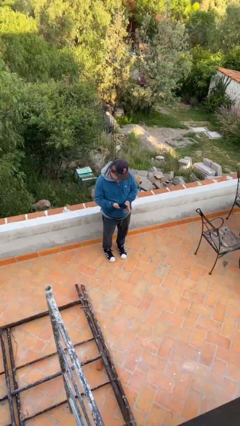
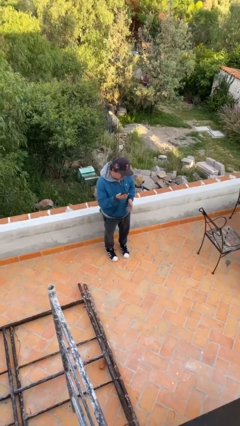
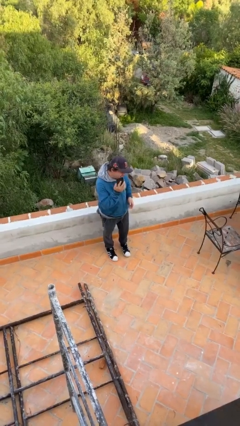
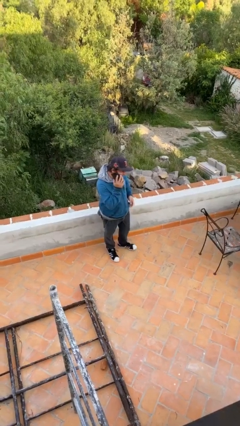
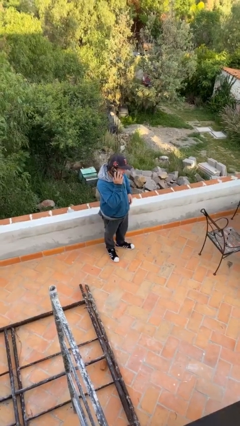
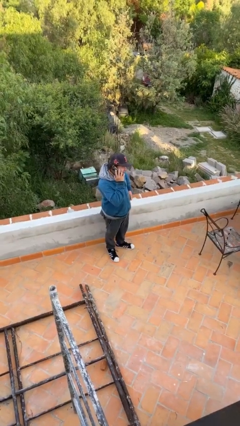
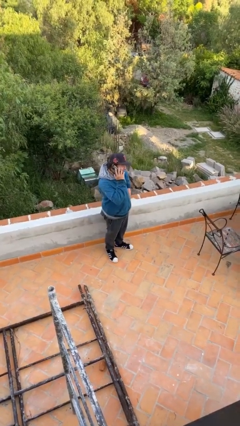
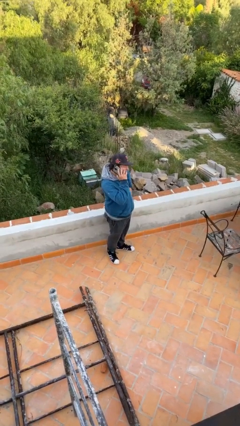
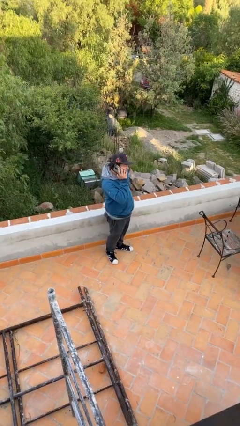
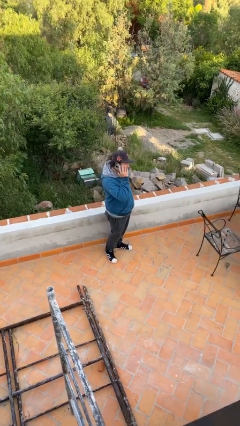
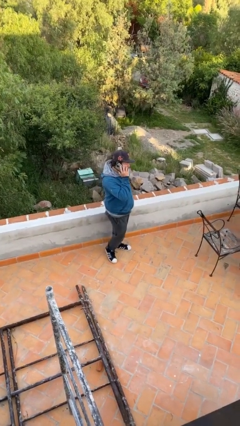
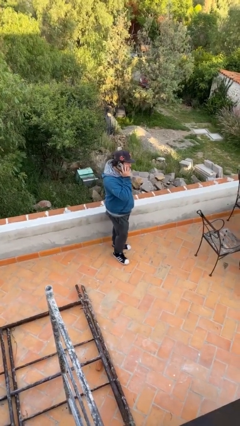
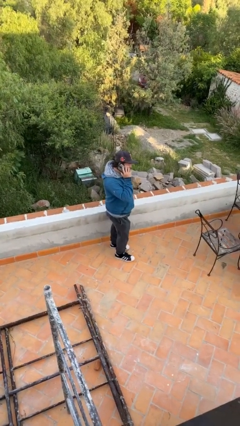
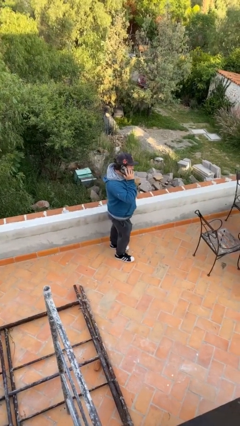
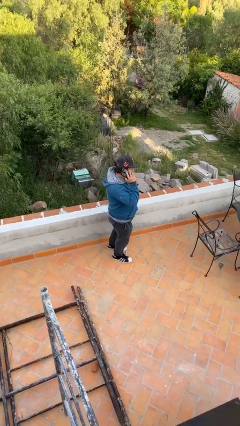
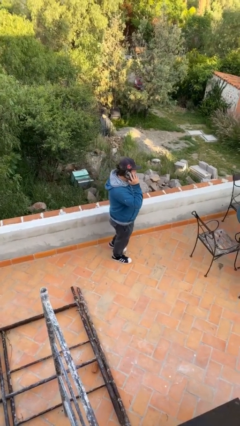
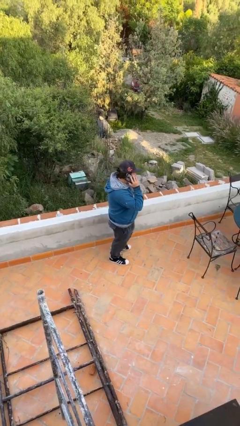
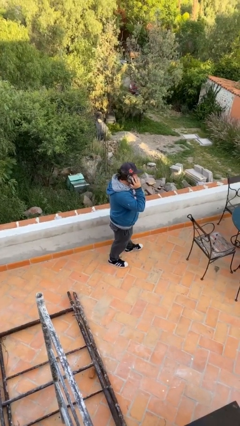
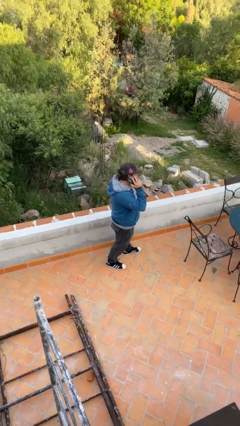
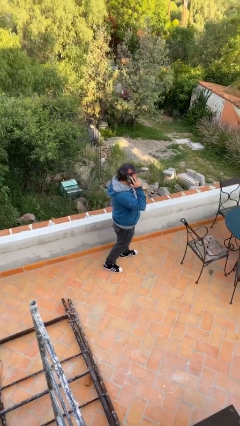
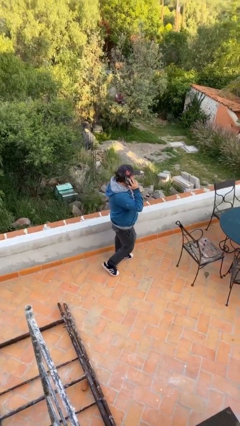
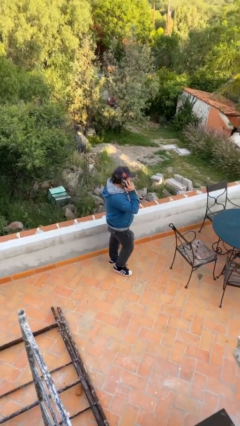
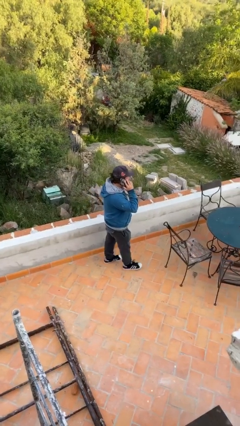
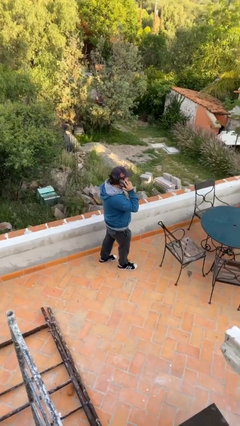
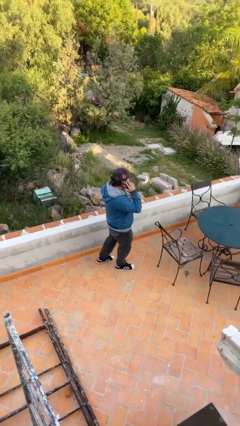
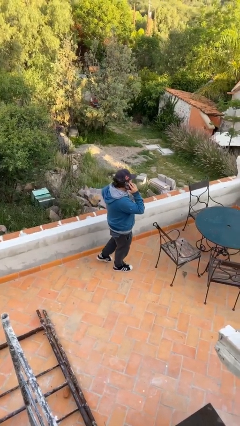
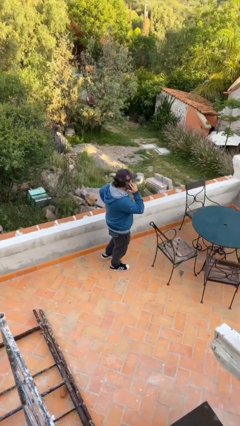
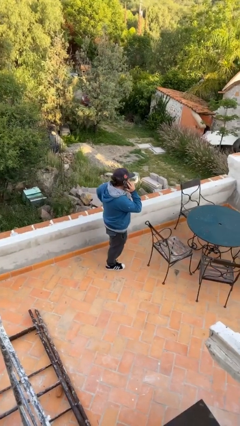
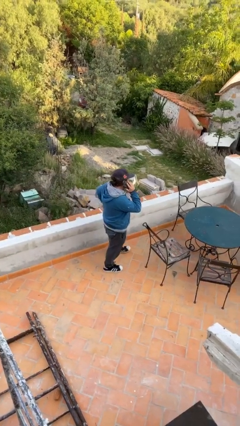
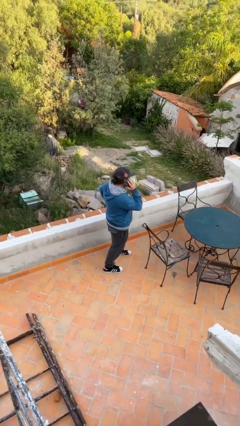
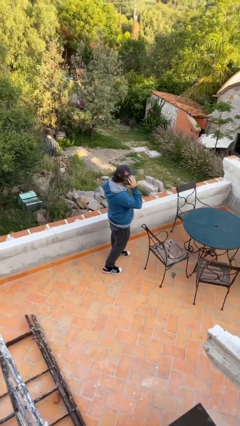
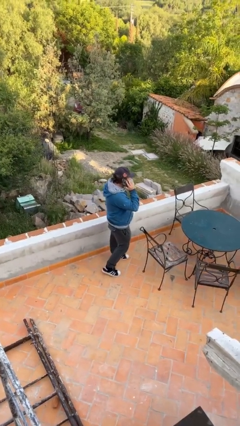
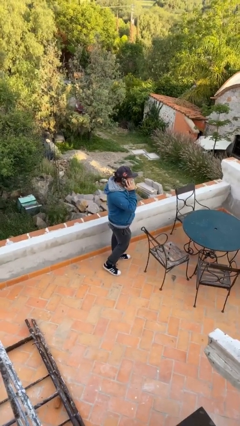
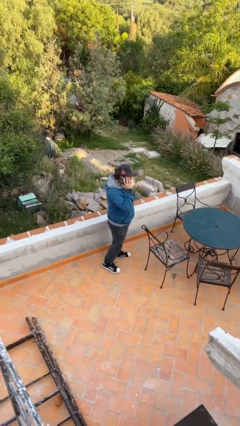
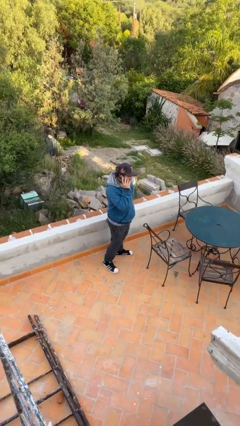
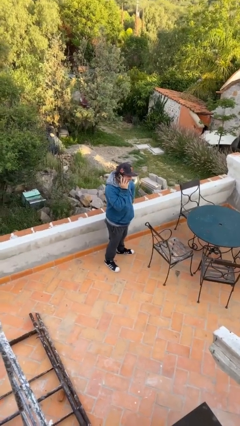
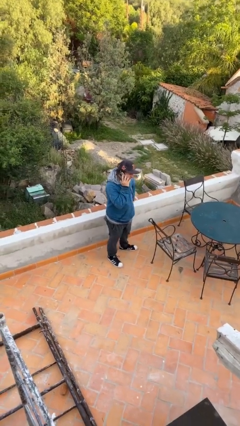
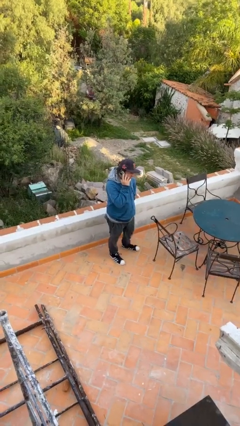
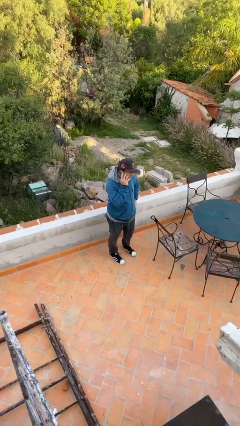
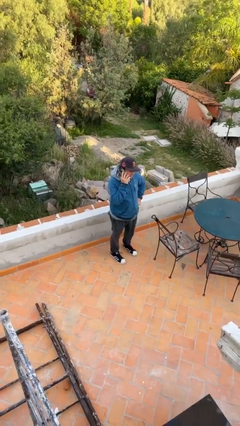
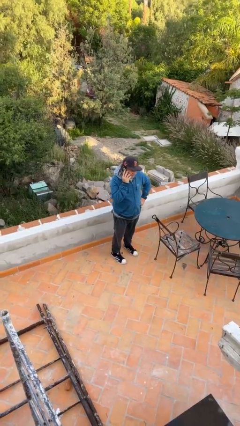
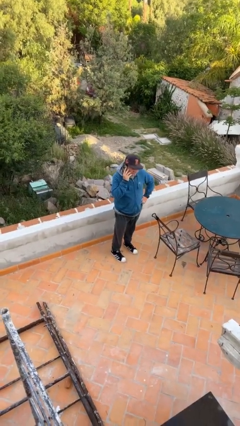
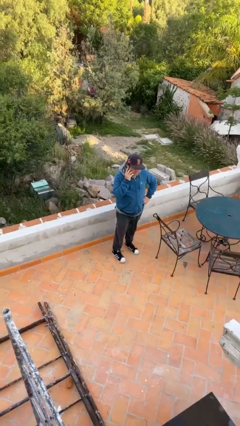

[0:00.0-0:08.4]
person talks on phone

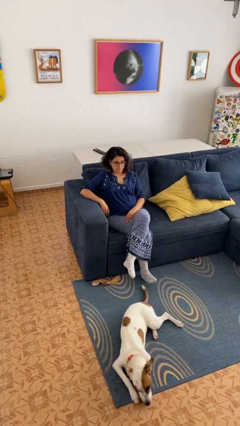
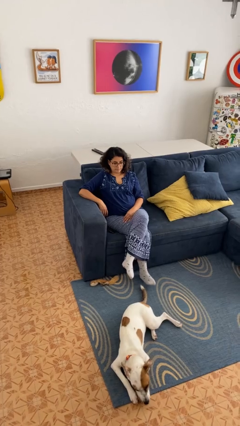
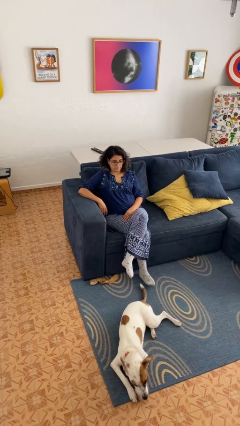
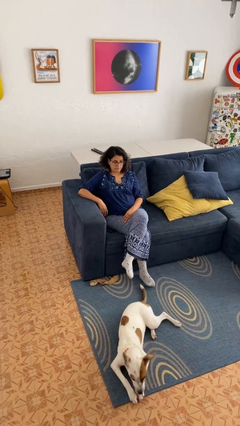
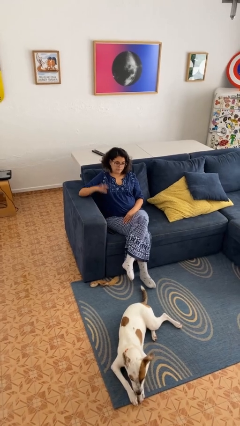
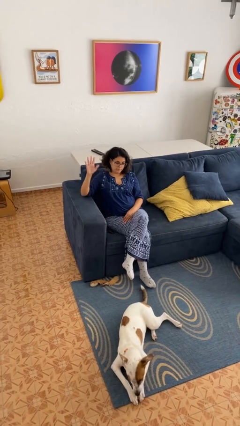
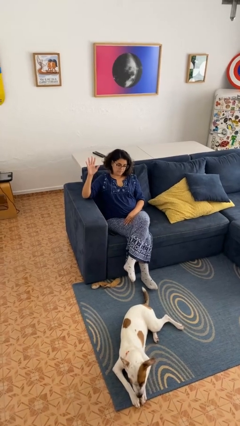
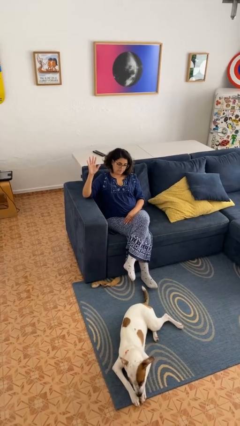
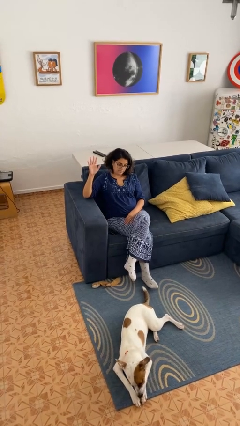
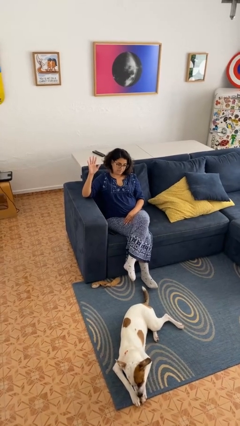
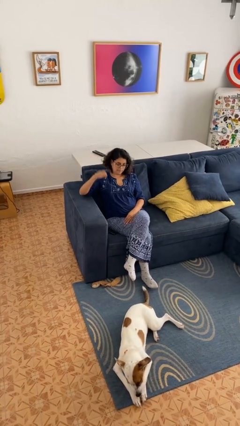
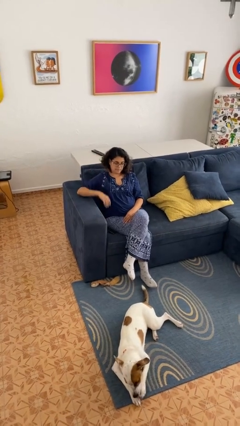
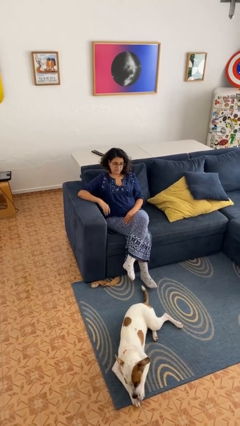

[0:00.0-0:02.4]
person gestures number five

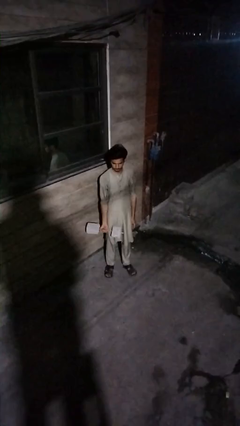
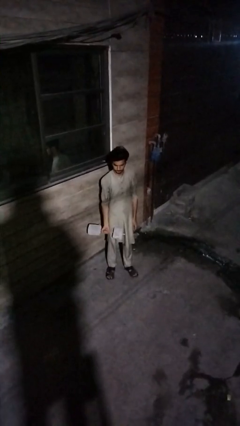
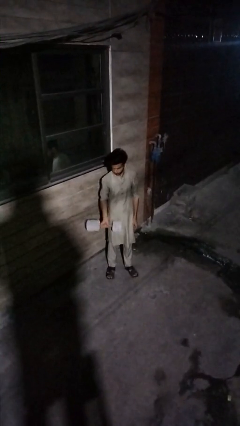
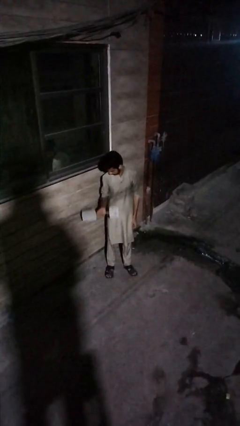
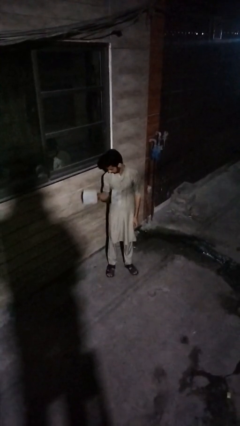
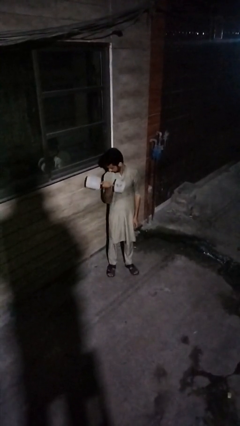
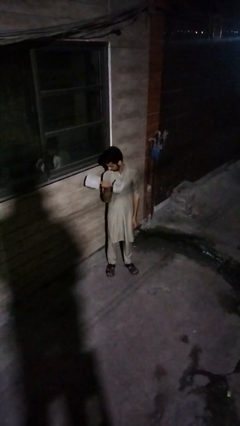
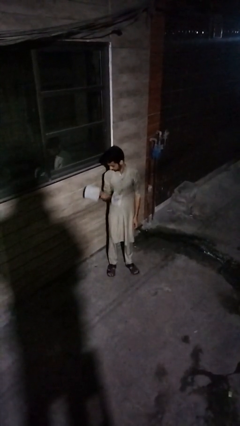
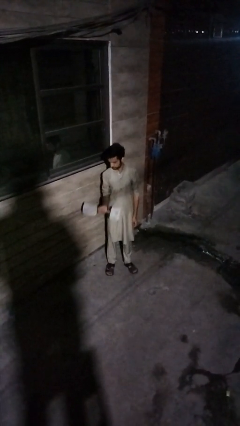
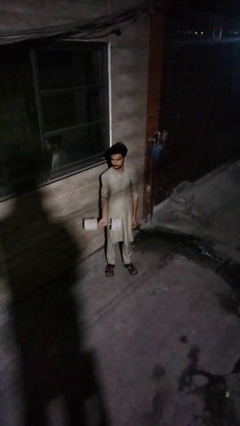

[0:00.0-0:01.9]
person lifts dumbbells

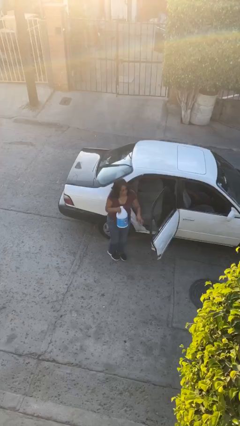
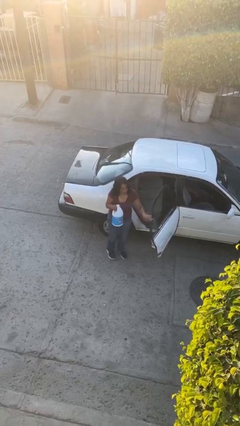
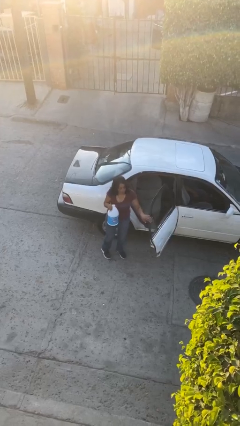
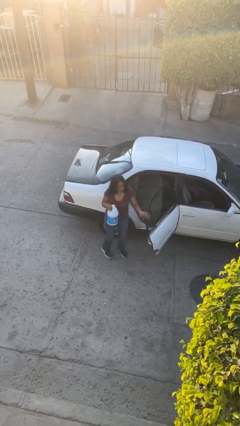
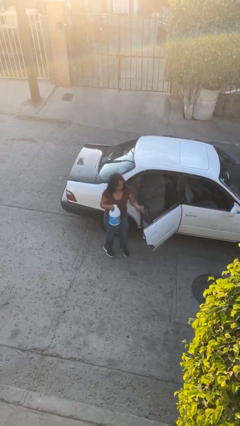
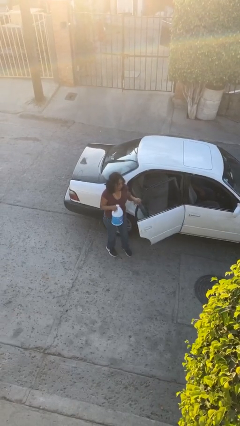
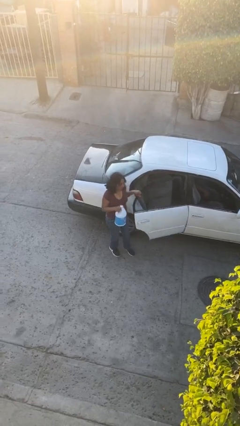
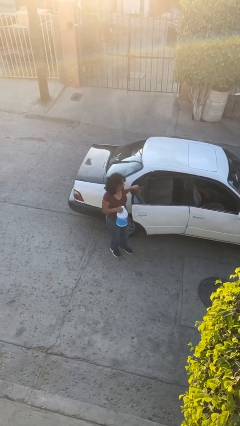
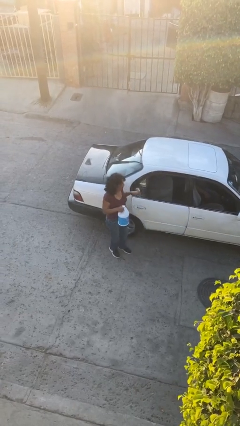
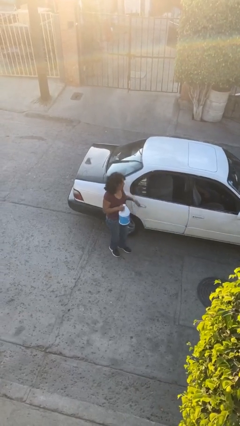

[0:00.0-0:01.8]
person closes car door

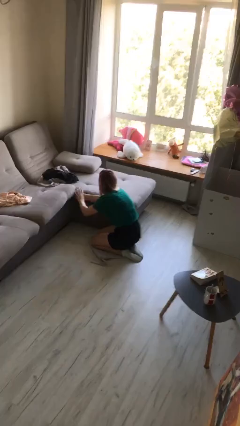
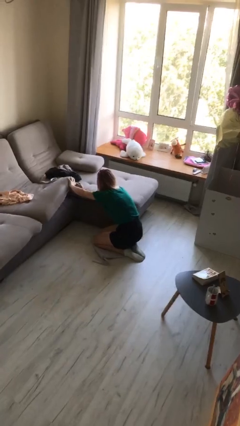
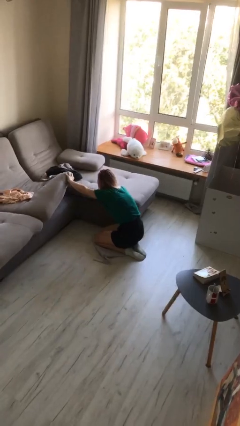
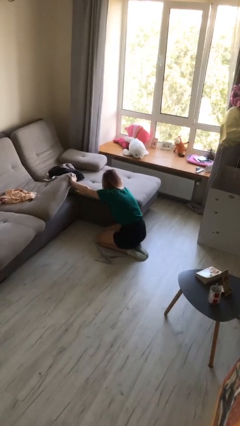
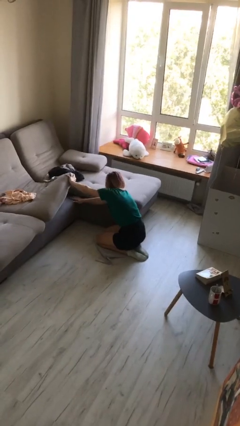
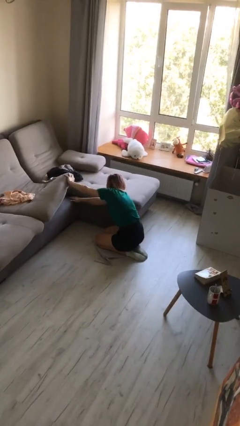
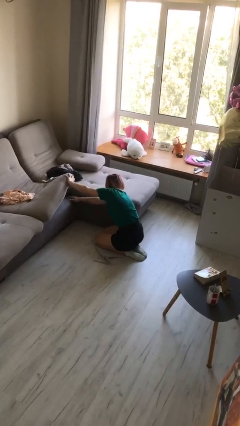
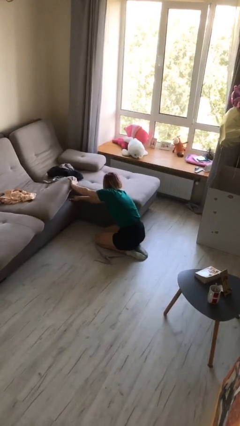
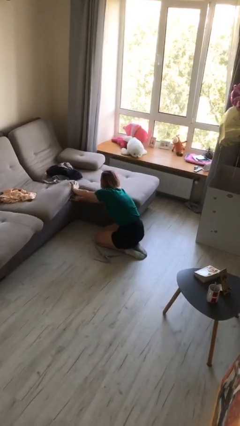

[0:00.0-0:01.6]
person searches under couch

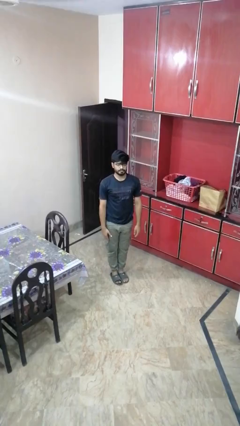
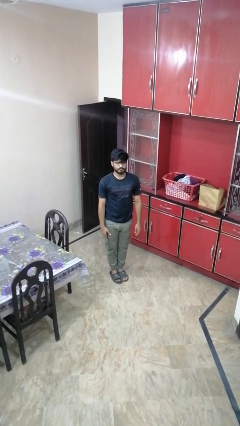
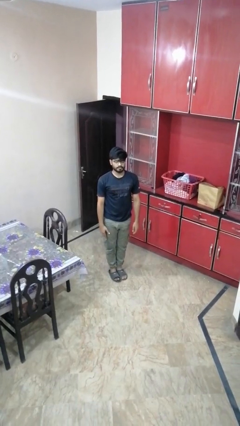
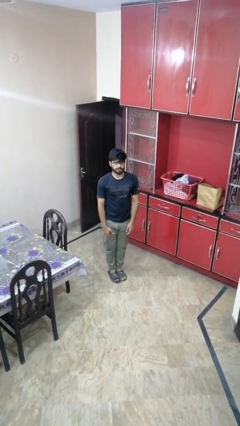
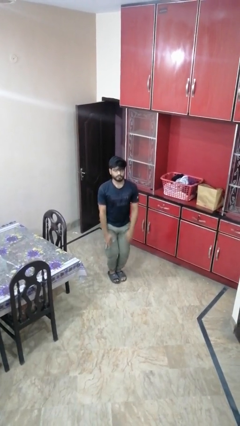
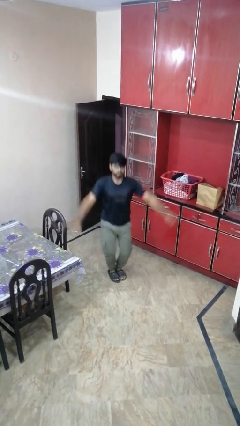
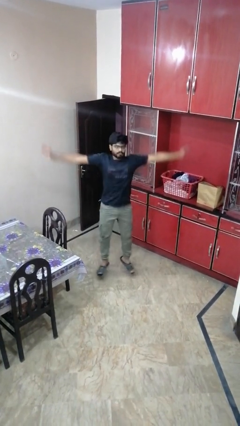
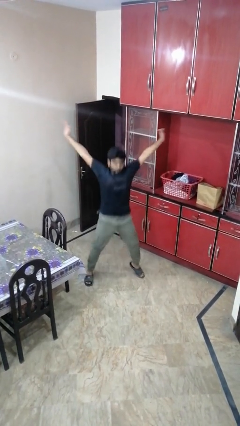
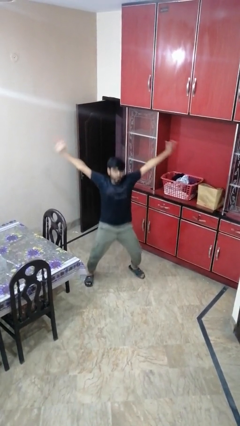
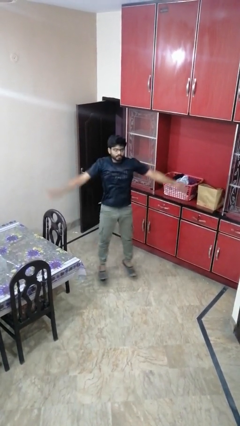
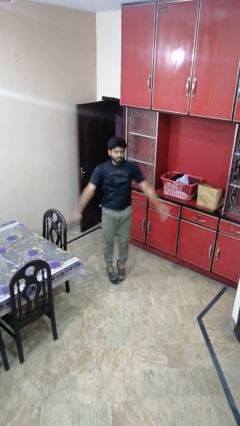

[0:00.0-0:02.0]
person exercises with jumping jacks
